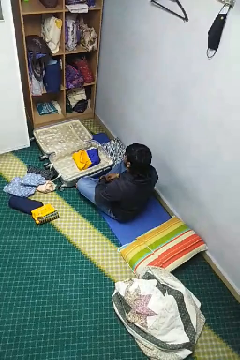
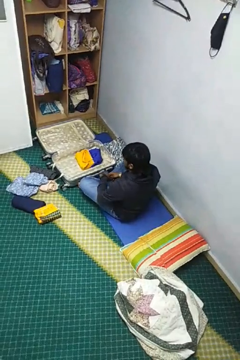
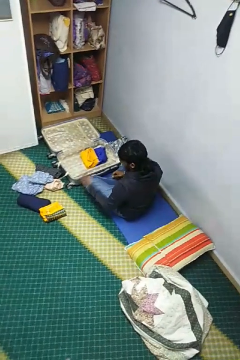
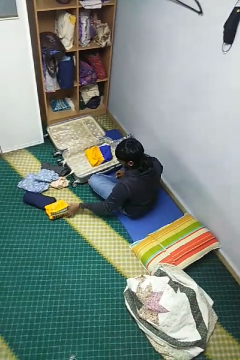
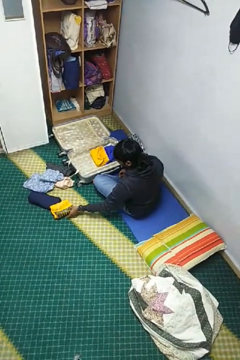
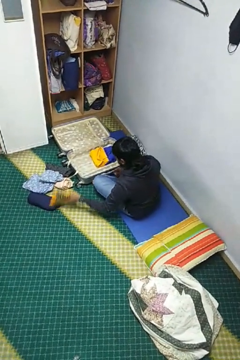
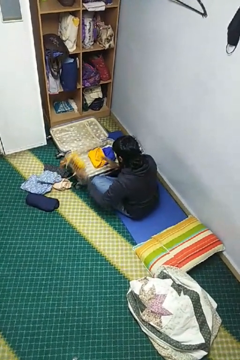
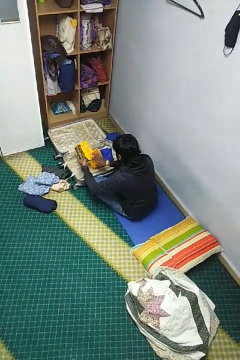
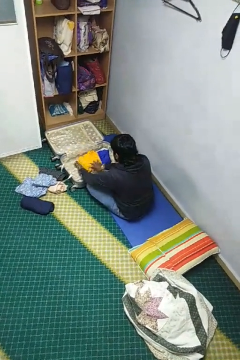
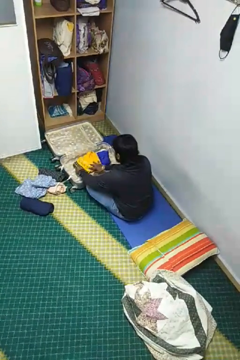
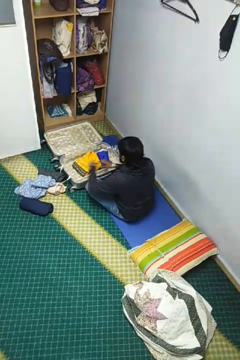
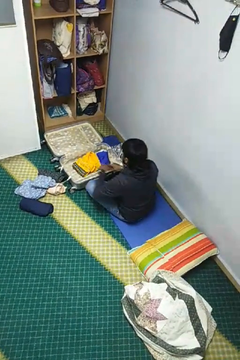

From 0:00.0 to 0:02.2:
person loads clothes into suitcase

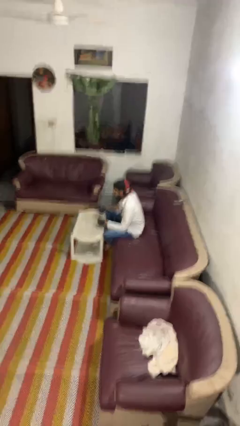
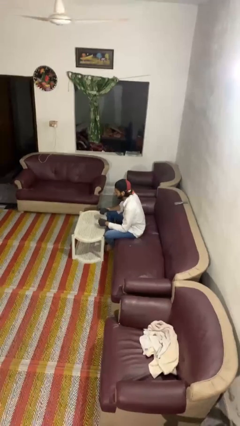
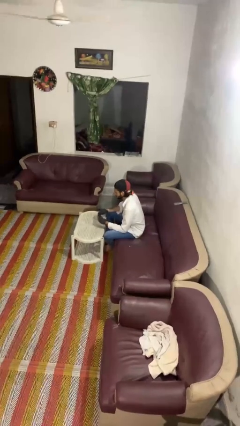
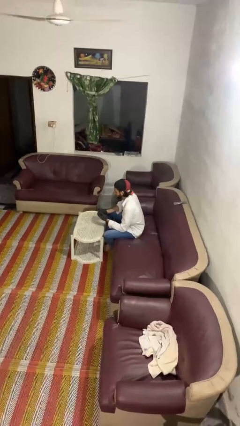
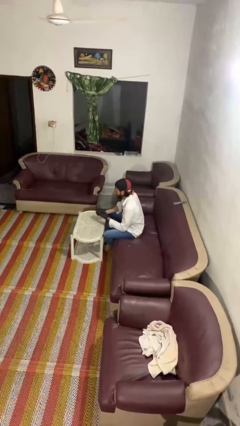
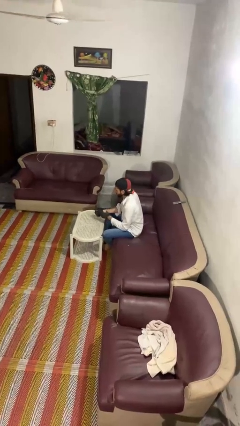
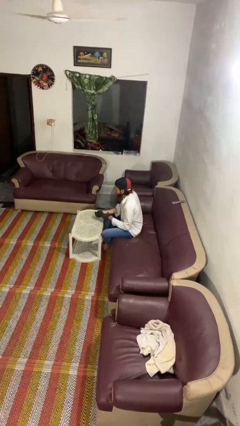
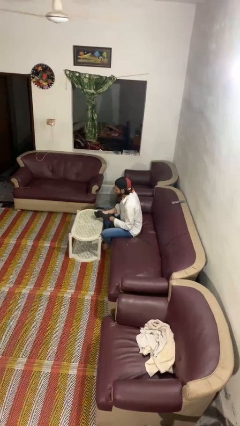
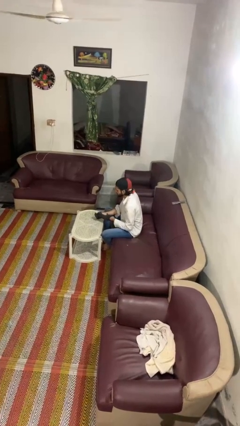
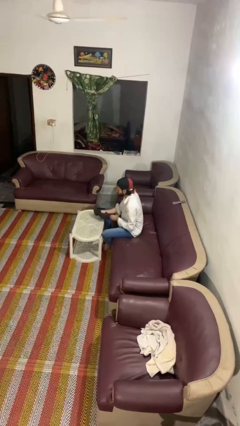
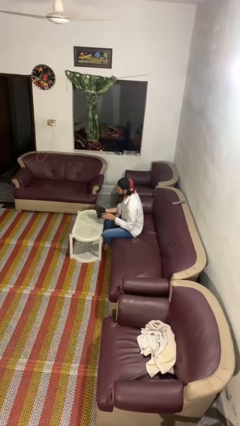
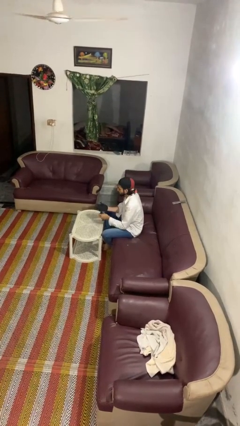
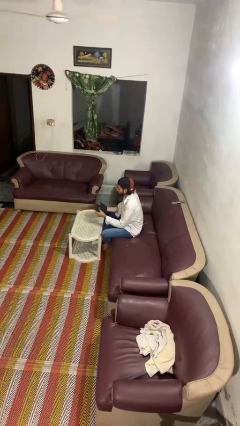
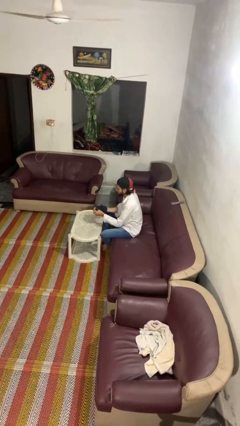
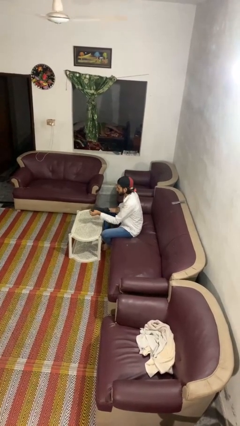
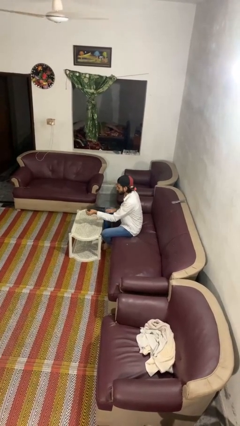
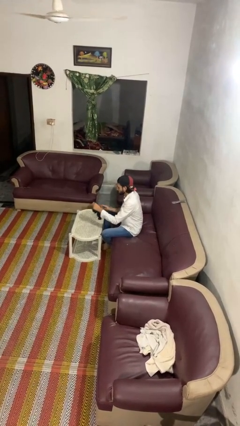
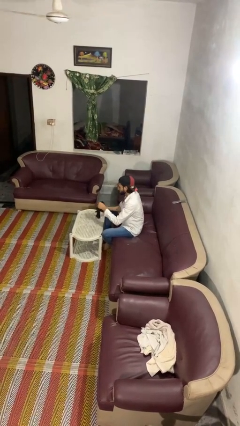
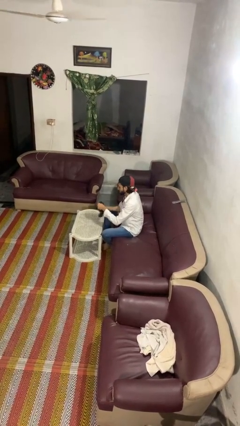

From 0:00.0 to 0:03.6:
person takes off gloves

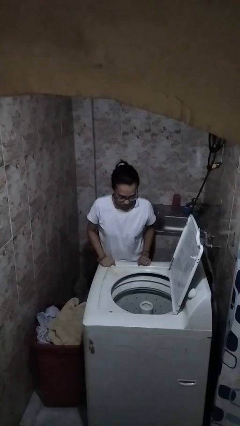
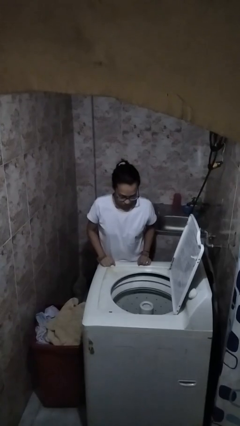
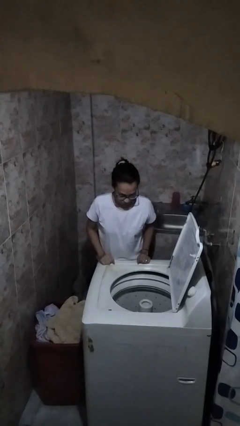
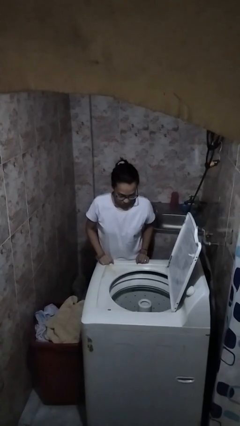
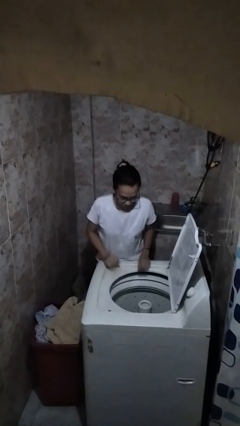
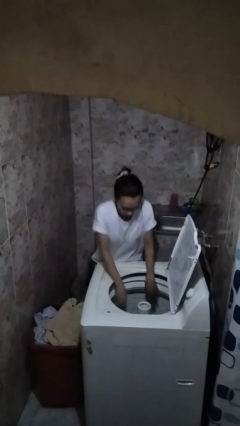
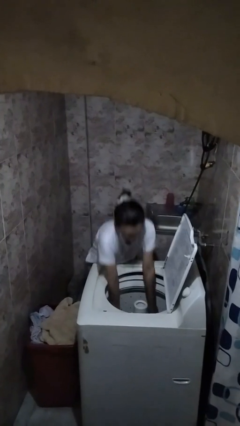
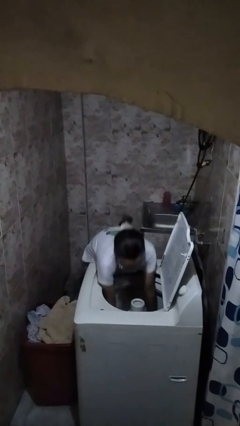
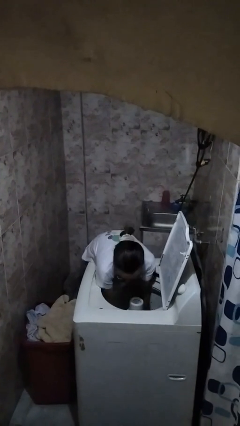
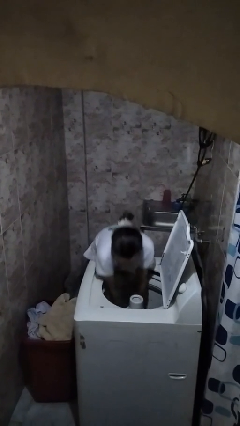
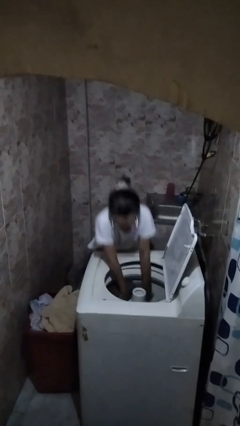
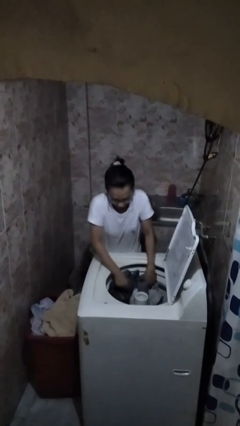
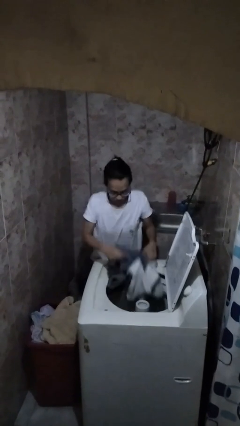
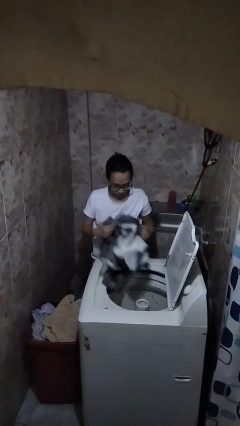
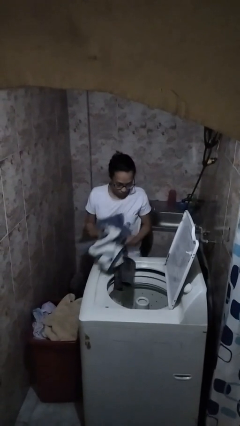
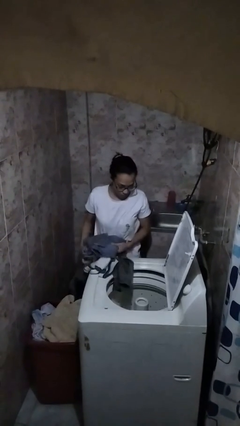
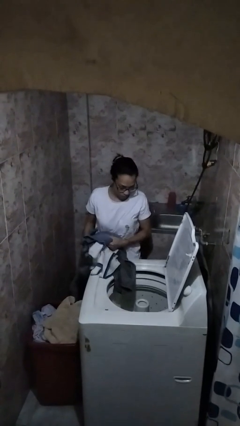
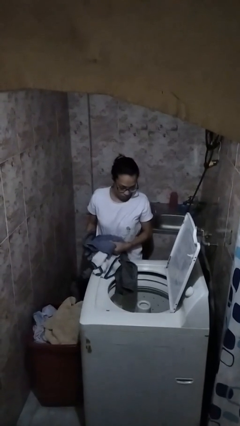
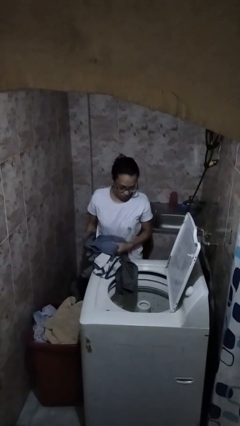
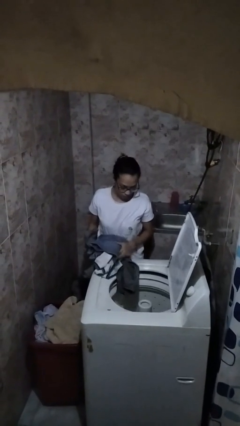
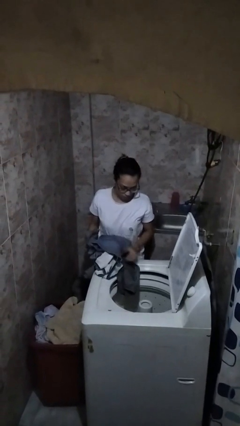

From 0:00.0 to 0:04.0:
person loads clotheswasher

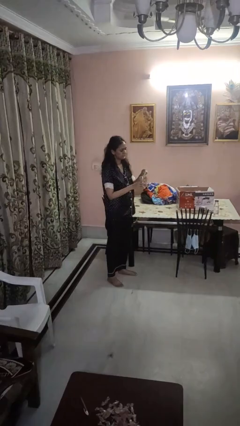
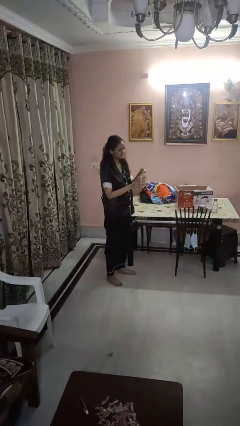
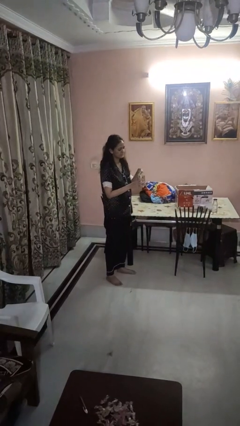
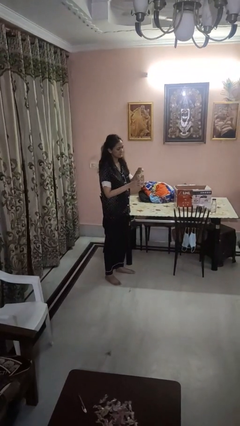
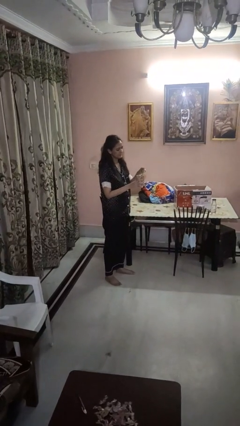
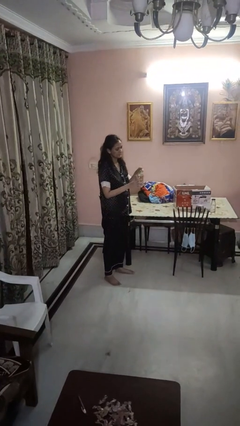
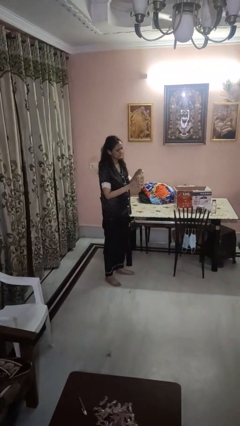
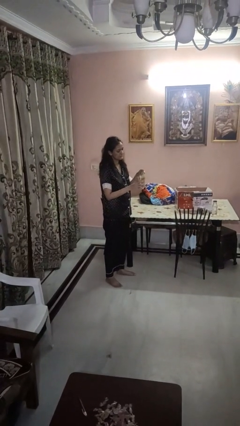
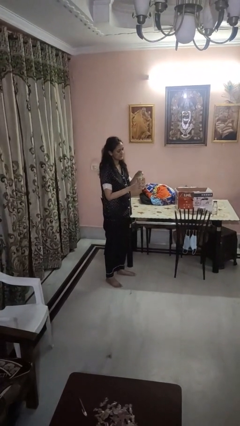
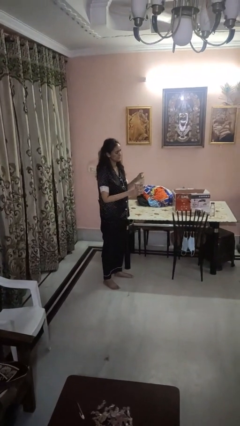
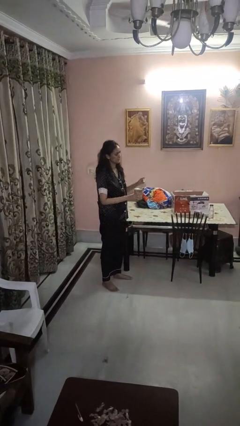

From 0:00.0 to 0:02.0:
person opens can with can opener

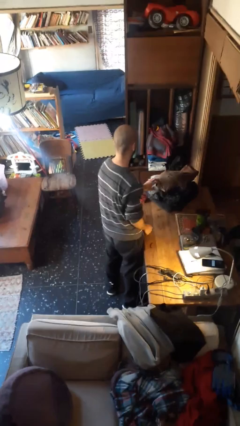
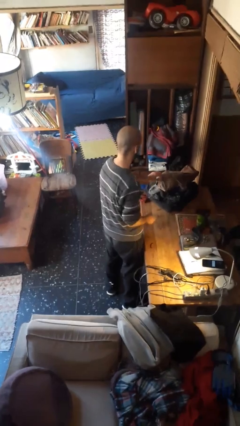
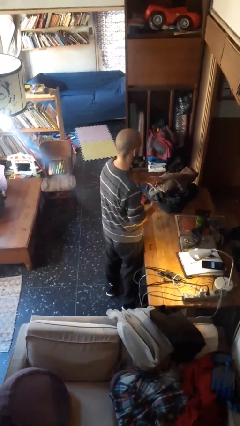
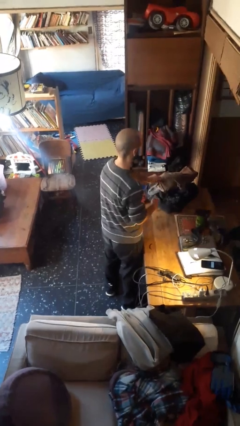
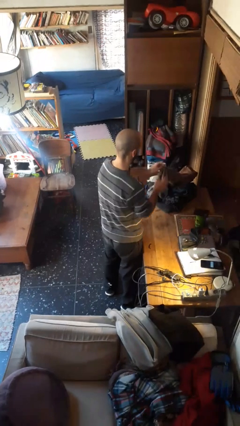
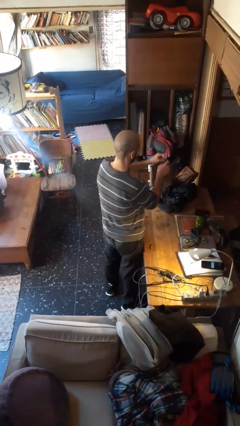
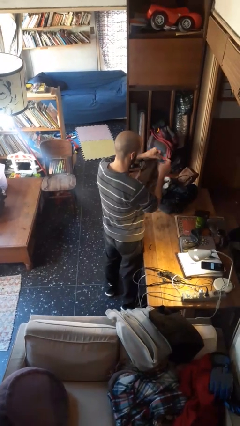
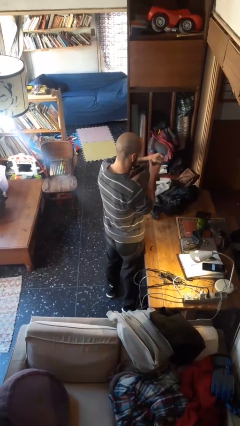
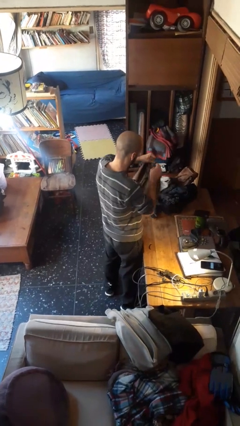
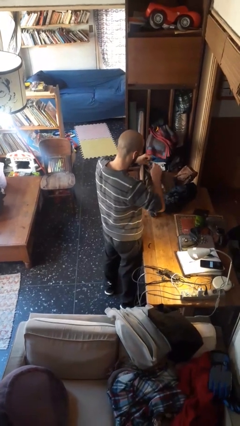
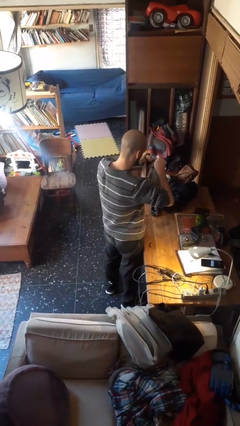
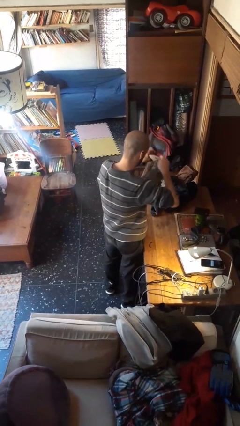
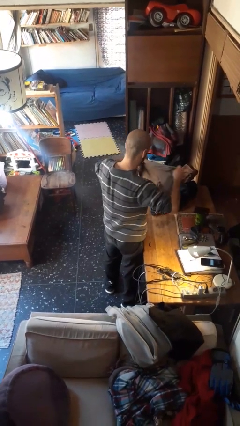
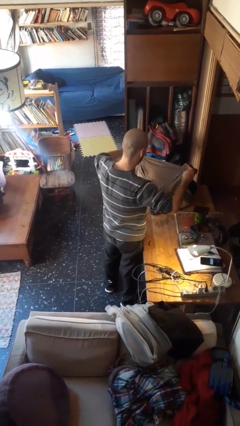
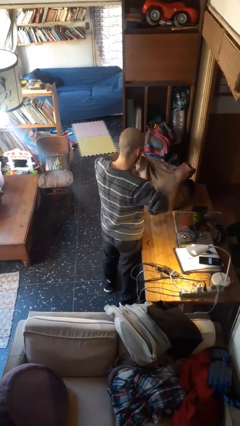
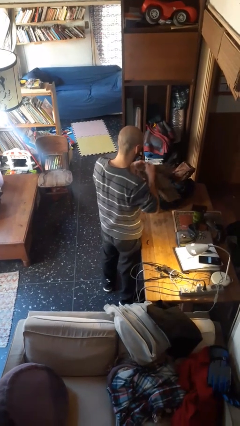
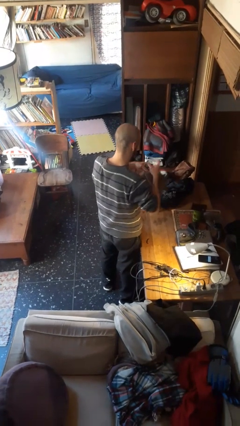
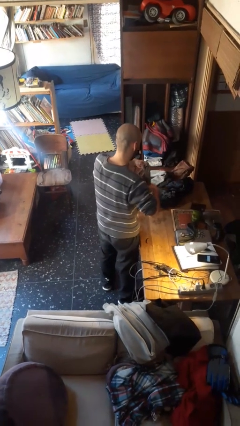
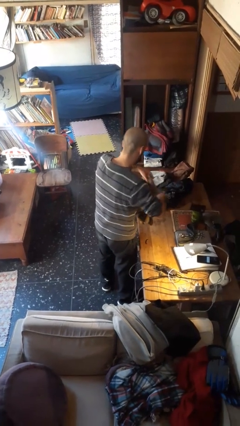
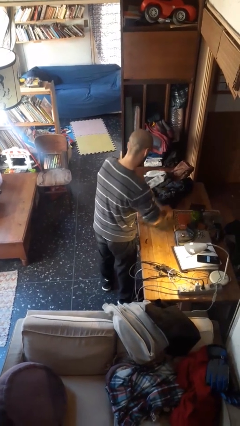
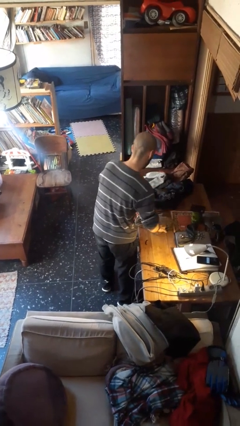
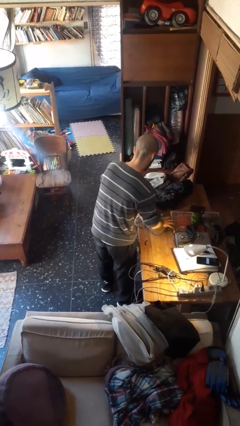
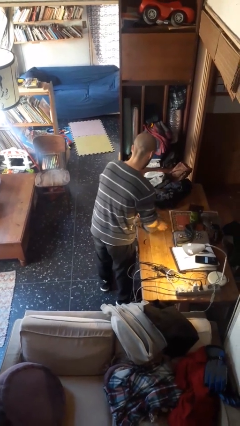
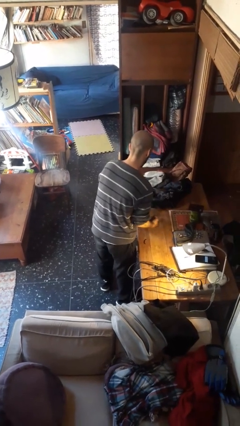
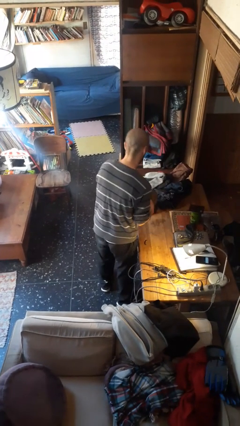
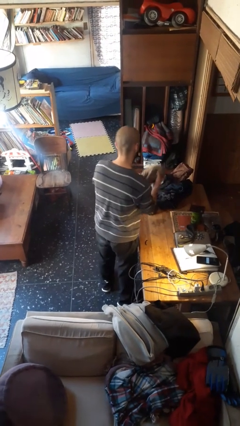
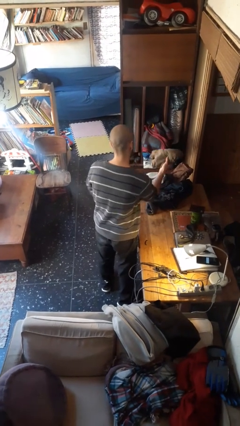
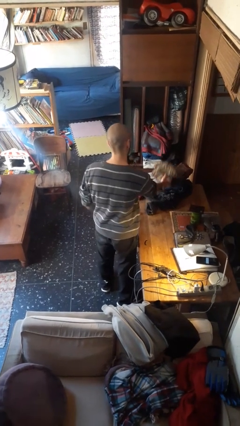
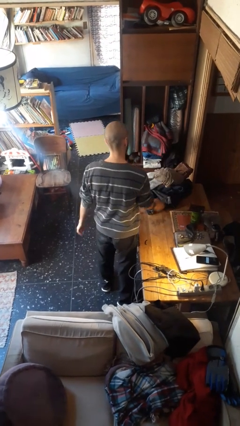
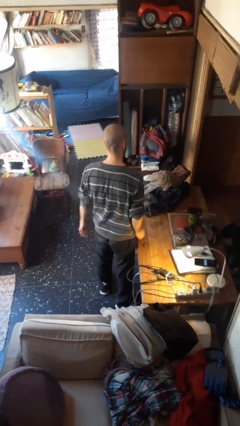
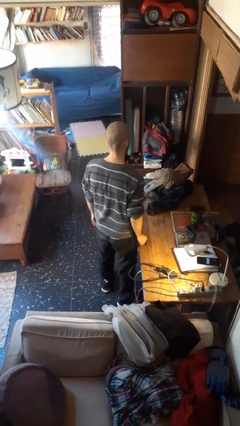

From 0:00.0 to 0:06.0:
person folds shirt

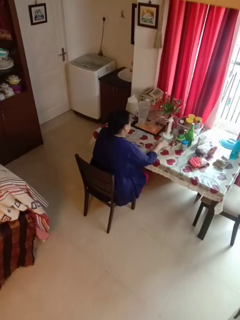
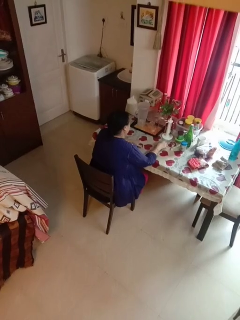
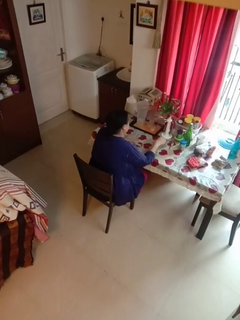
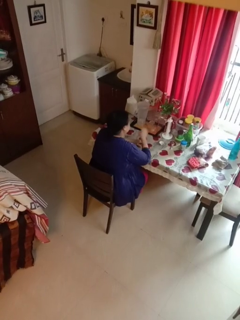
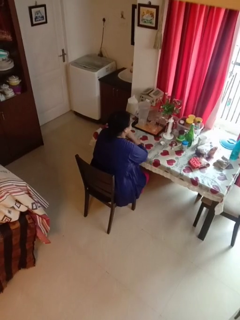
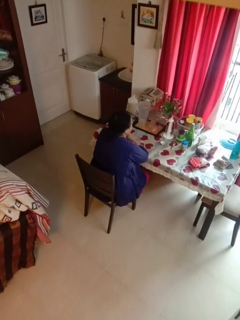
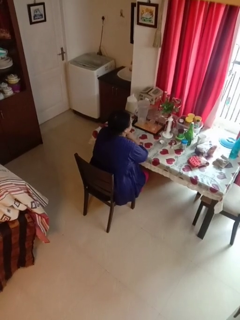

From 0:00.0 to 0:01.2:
person puts down object on table
